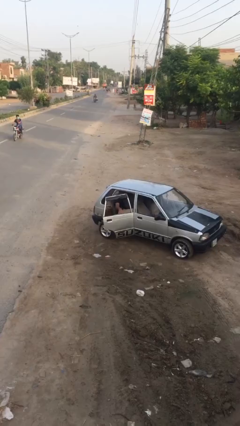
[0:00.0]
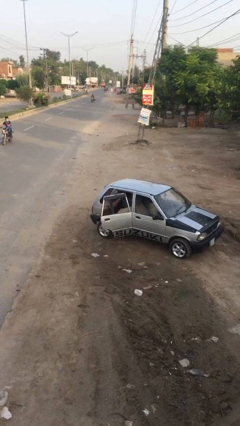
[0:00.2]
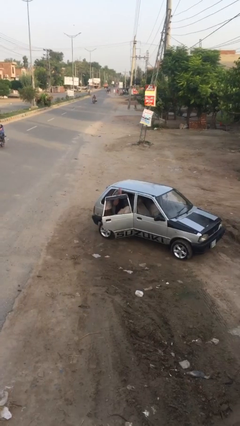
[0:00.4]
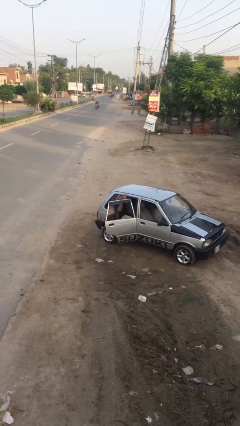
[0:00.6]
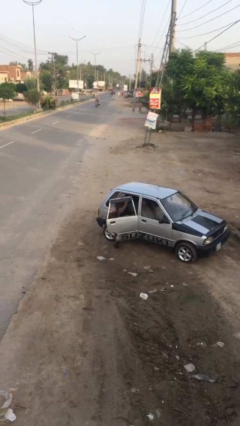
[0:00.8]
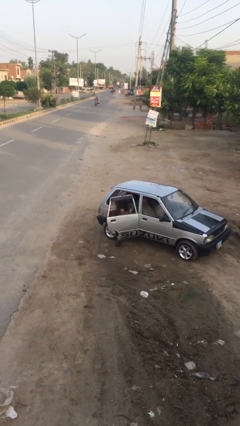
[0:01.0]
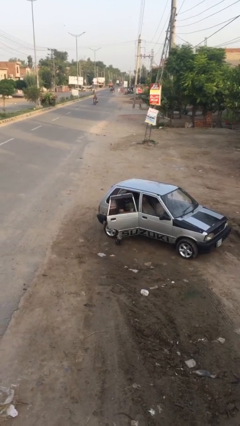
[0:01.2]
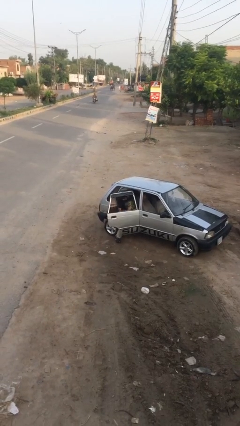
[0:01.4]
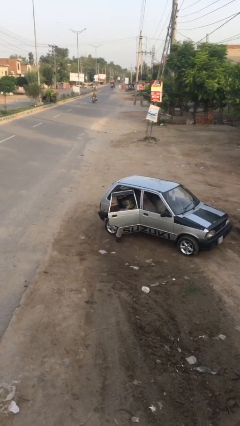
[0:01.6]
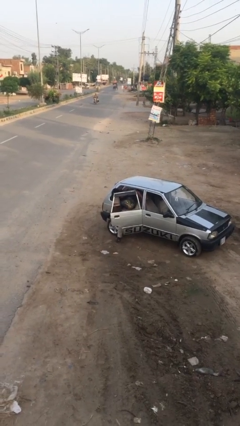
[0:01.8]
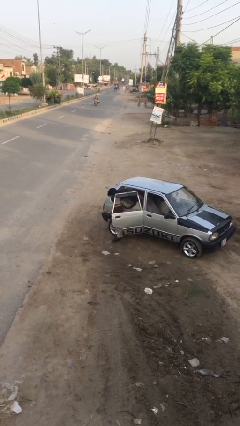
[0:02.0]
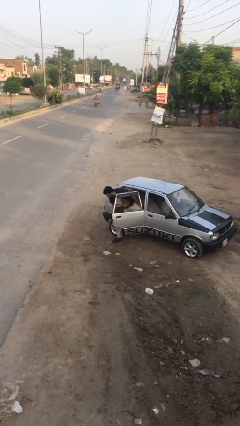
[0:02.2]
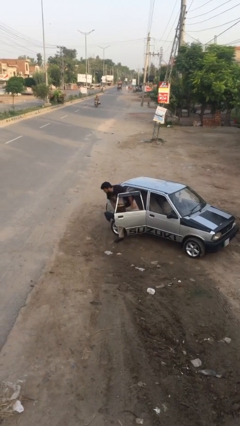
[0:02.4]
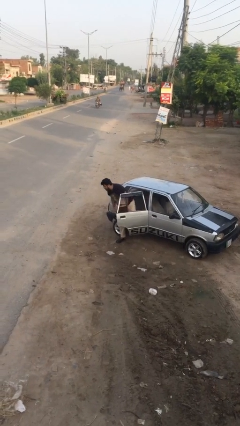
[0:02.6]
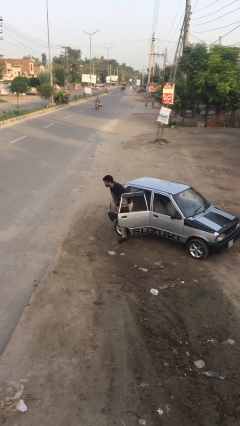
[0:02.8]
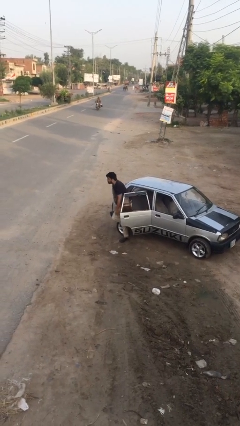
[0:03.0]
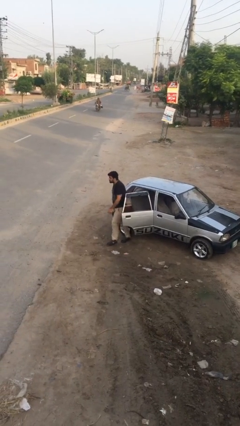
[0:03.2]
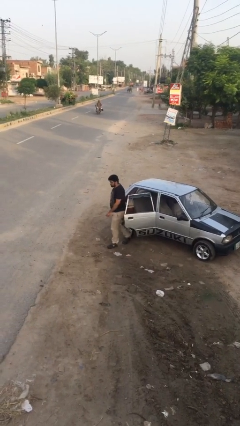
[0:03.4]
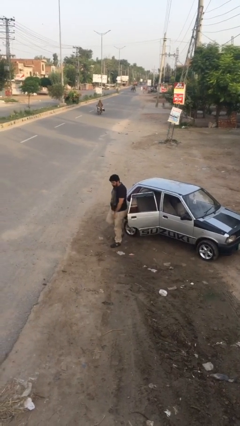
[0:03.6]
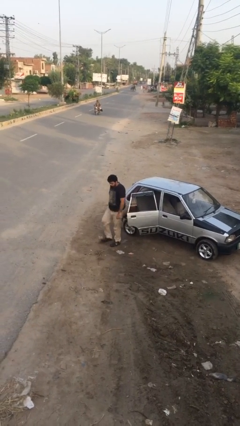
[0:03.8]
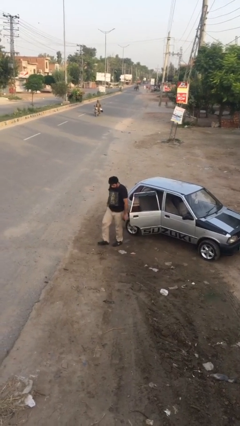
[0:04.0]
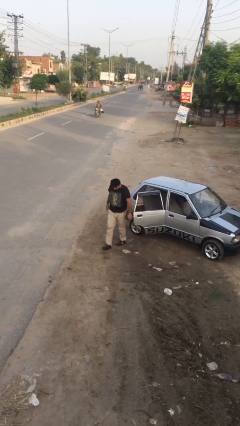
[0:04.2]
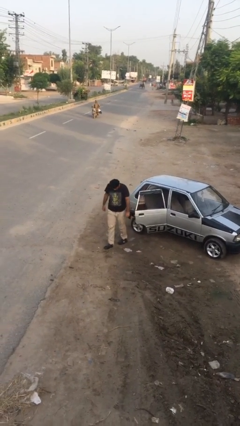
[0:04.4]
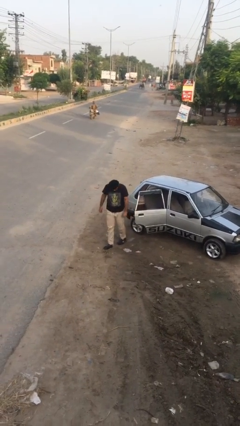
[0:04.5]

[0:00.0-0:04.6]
person exits car

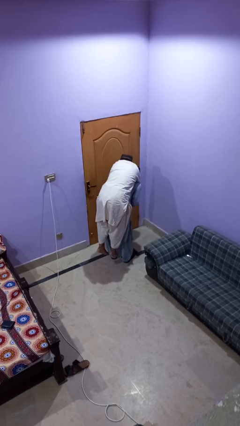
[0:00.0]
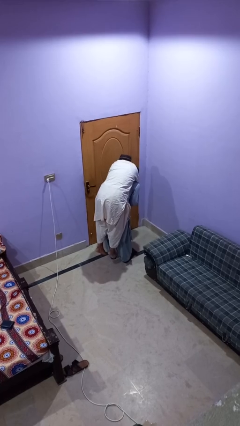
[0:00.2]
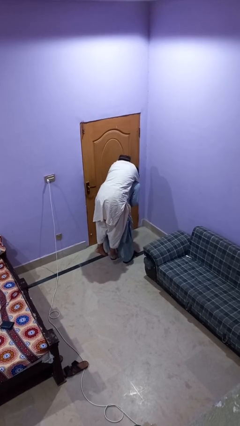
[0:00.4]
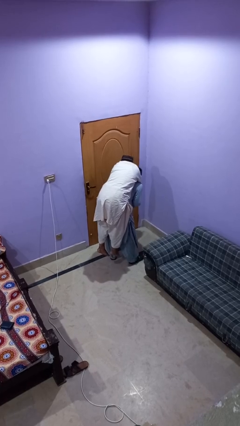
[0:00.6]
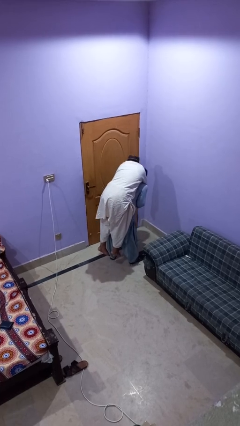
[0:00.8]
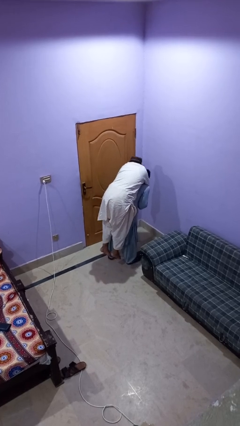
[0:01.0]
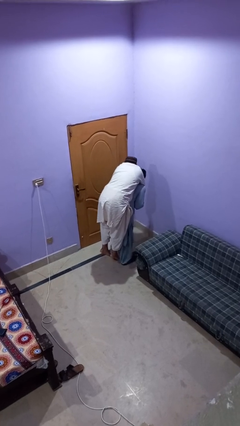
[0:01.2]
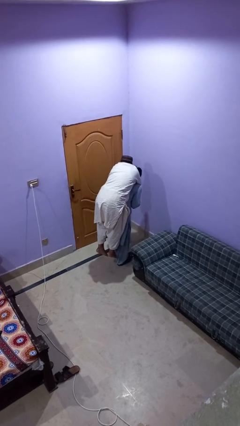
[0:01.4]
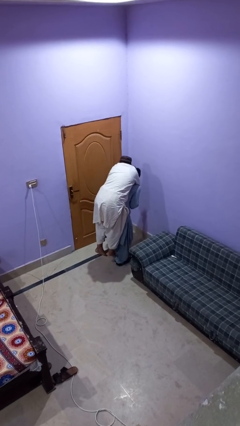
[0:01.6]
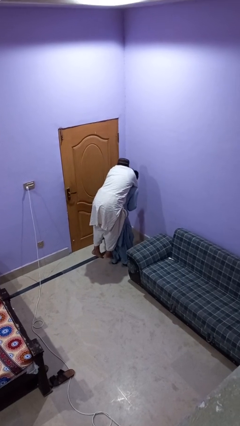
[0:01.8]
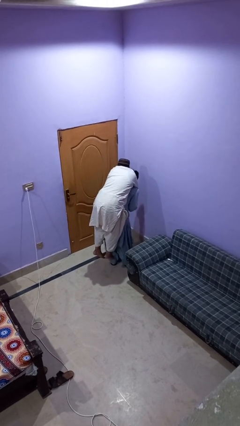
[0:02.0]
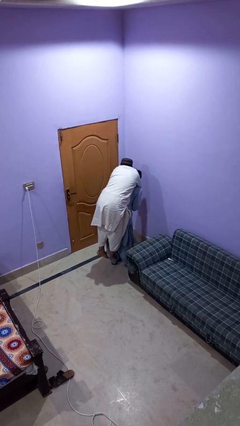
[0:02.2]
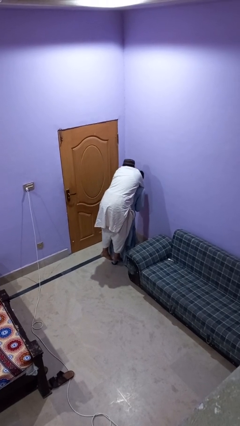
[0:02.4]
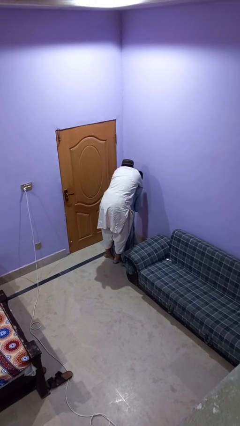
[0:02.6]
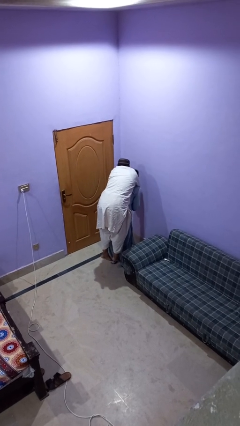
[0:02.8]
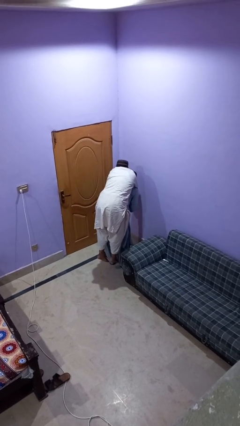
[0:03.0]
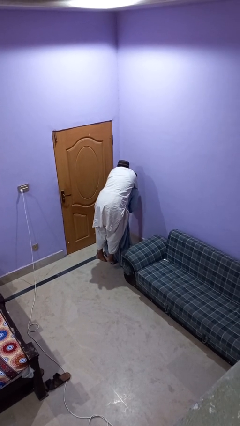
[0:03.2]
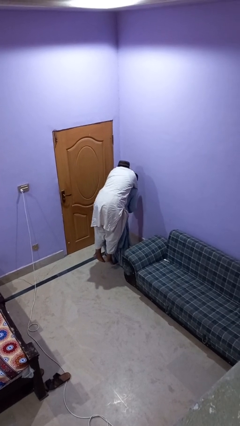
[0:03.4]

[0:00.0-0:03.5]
person carries person on back

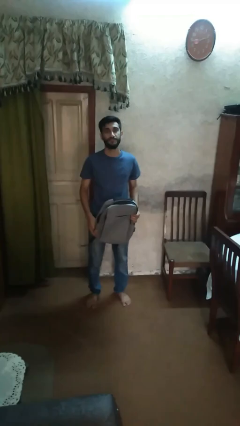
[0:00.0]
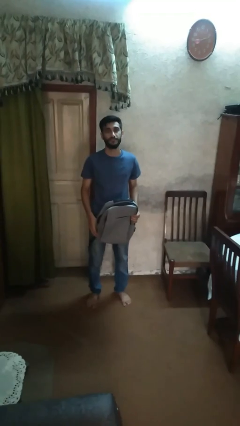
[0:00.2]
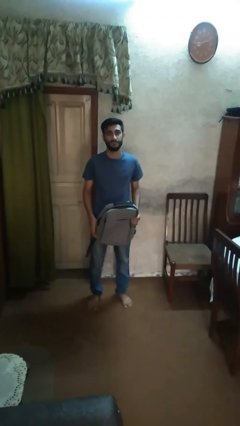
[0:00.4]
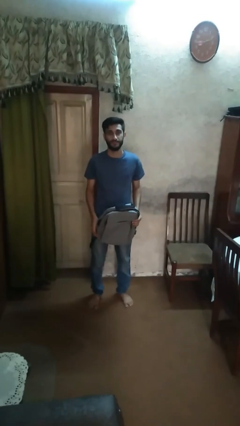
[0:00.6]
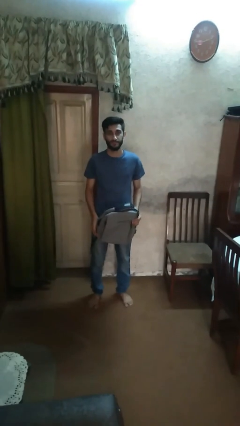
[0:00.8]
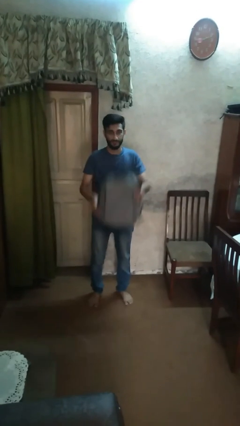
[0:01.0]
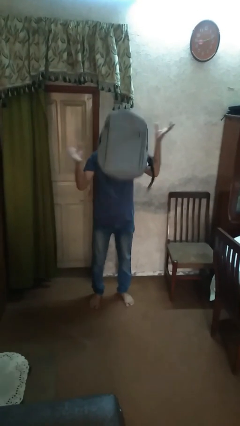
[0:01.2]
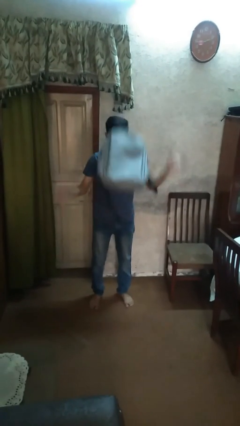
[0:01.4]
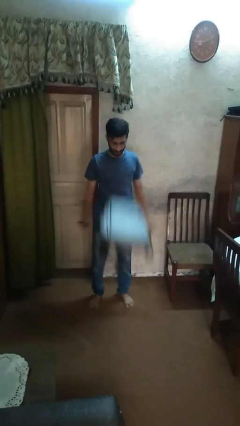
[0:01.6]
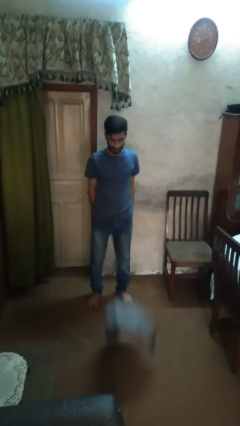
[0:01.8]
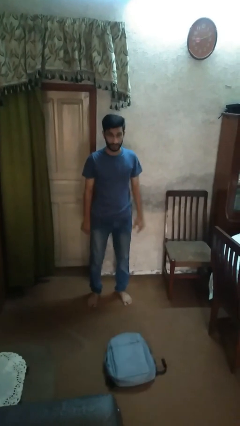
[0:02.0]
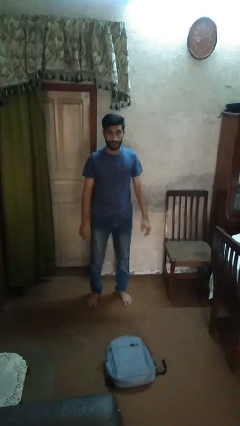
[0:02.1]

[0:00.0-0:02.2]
person throws object into air

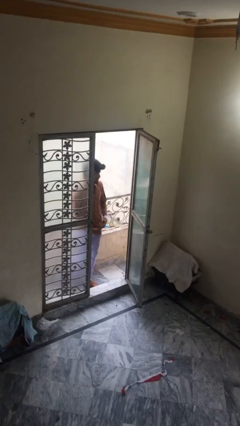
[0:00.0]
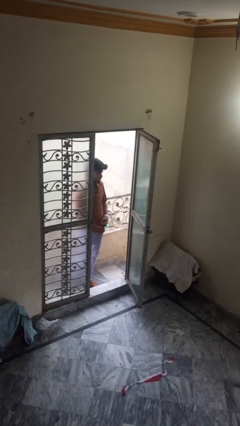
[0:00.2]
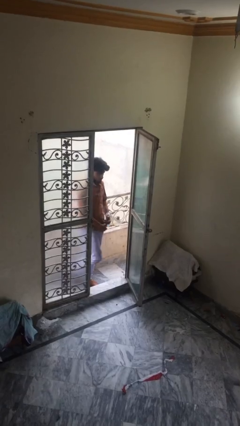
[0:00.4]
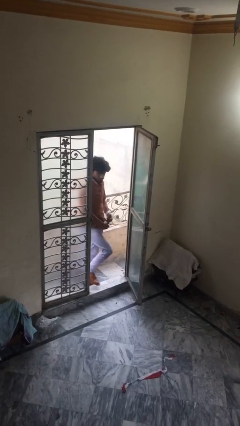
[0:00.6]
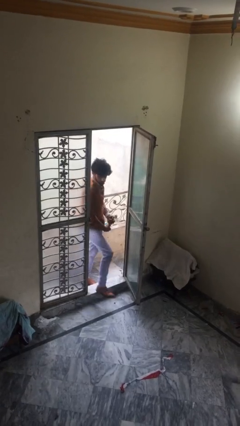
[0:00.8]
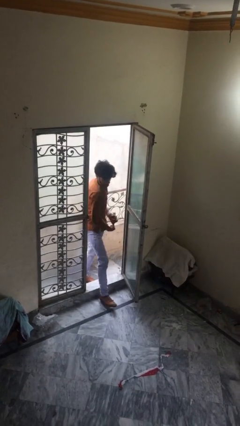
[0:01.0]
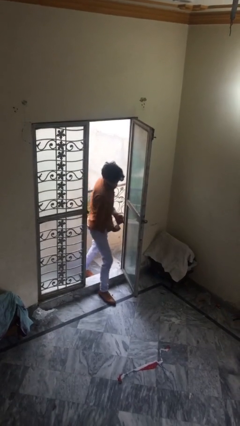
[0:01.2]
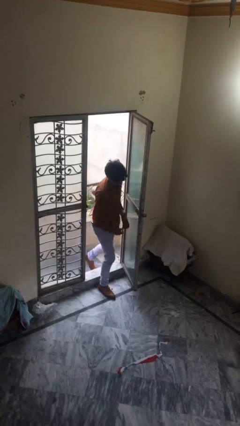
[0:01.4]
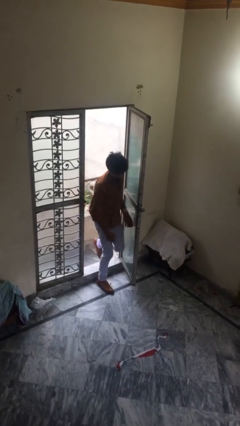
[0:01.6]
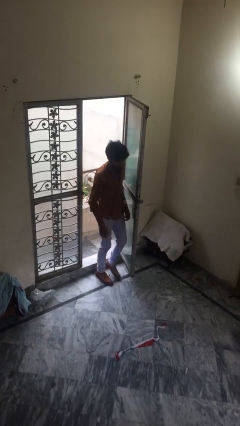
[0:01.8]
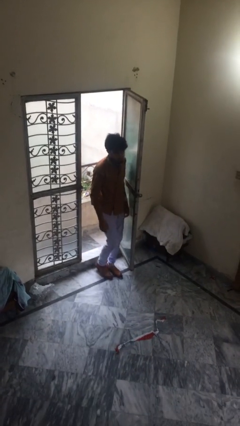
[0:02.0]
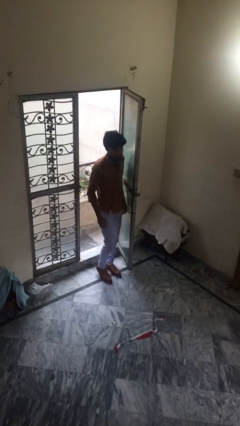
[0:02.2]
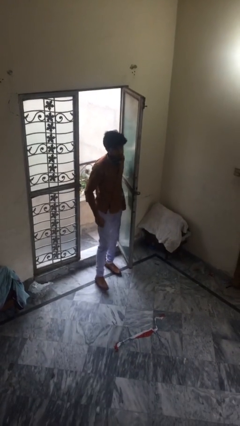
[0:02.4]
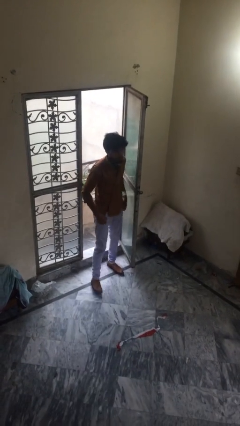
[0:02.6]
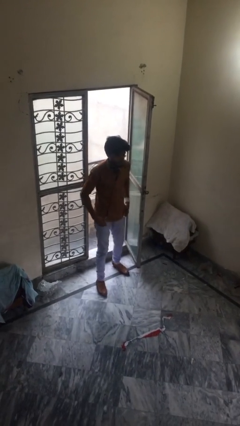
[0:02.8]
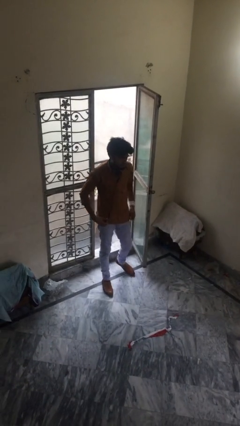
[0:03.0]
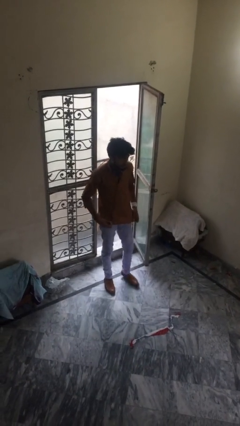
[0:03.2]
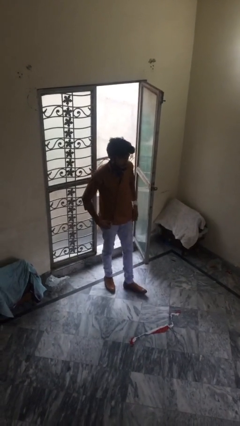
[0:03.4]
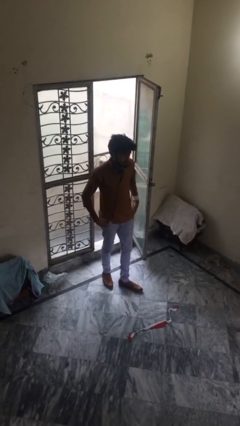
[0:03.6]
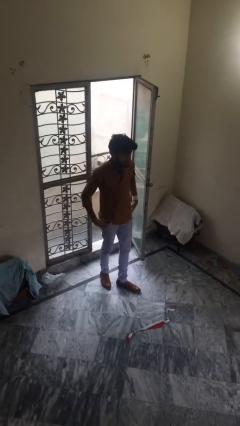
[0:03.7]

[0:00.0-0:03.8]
person enters scene through structure

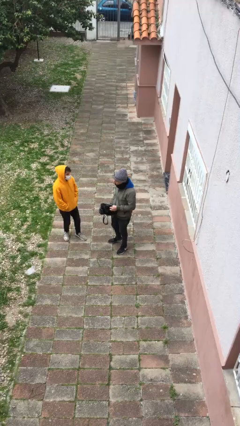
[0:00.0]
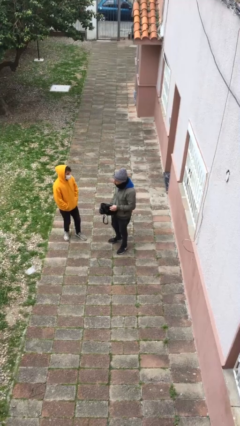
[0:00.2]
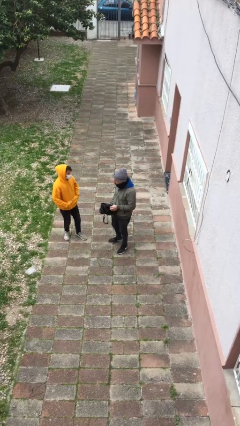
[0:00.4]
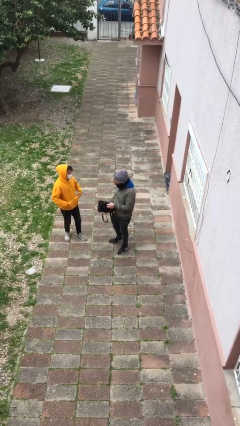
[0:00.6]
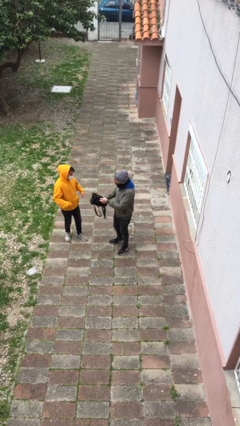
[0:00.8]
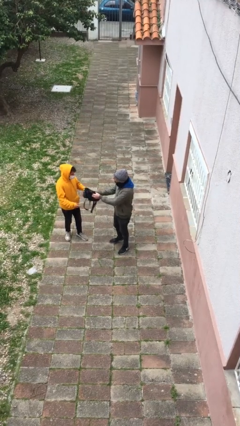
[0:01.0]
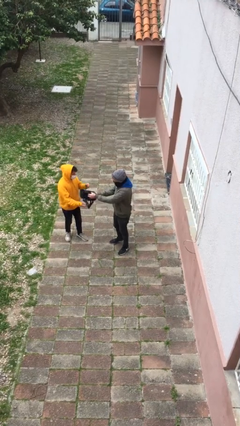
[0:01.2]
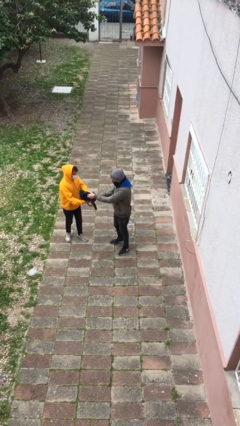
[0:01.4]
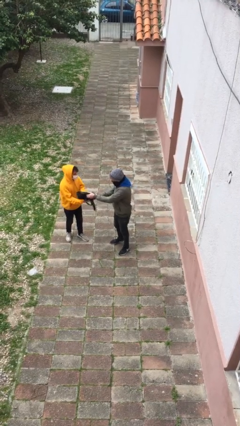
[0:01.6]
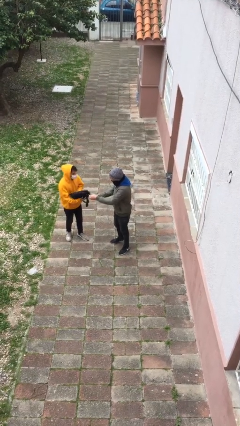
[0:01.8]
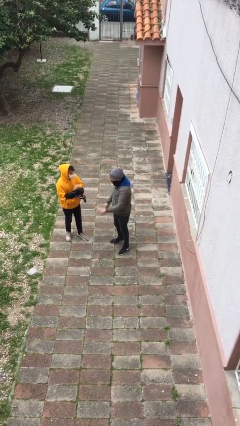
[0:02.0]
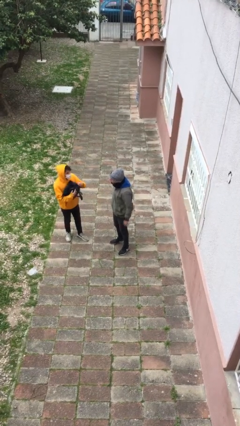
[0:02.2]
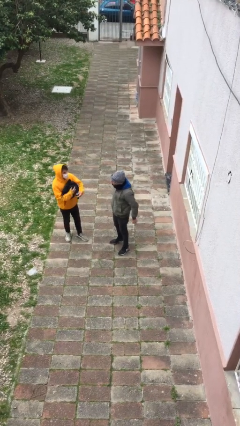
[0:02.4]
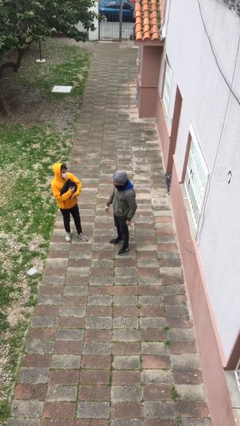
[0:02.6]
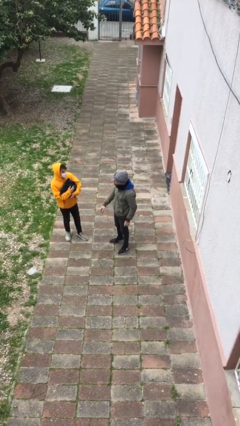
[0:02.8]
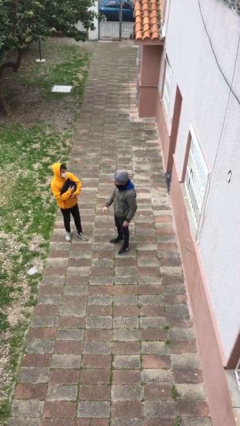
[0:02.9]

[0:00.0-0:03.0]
person transfers object to person

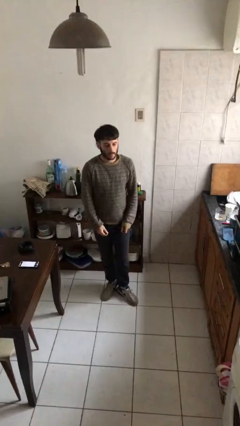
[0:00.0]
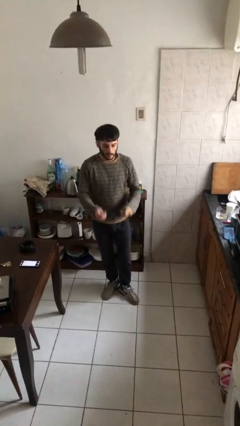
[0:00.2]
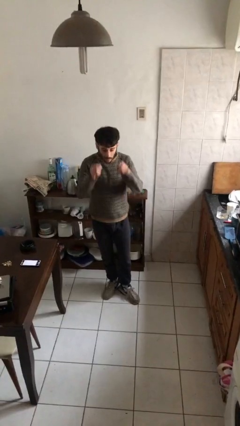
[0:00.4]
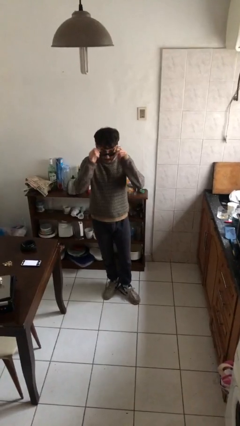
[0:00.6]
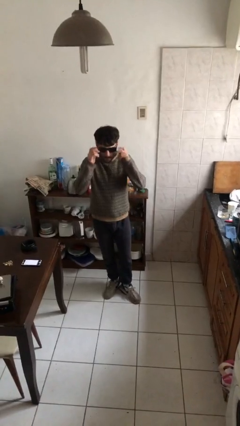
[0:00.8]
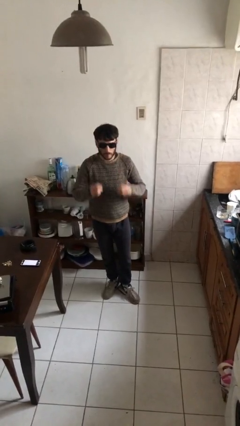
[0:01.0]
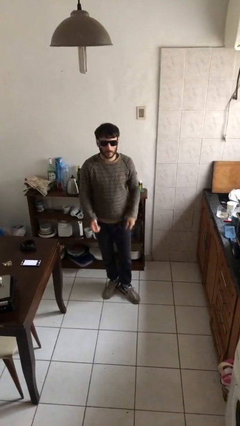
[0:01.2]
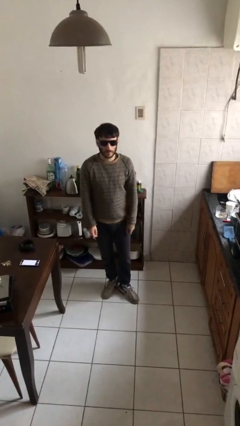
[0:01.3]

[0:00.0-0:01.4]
person puts on sunglasses
